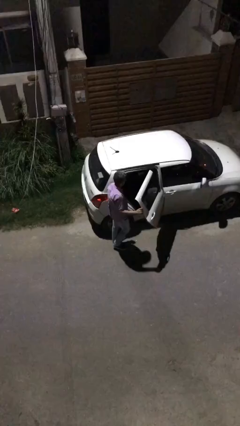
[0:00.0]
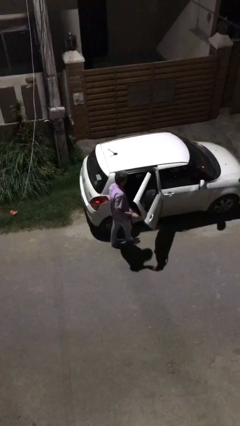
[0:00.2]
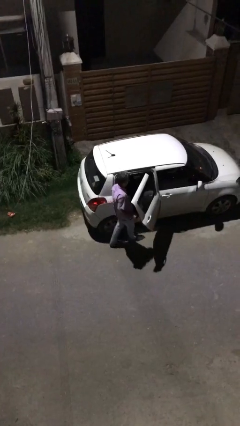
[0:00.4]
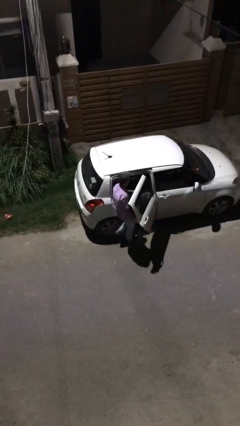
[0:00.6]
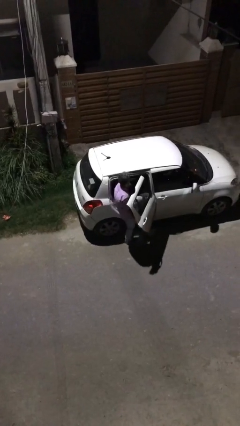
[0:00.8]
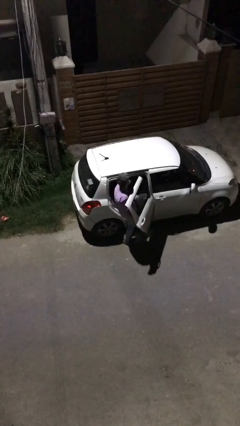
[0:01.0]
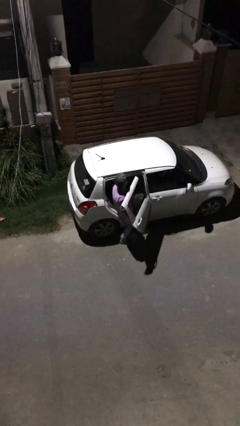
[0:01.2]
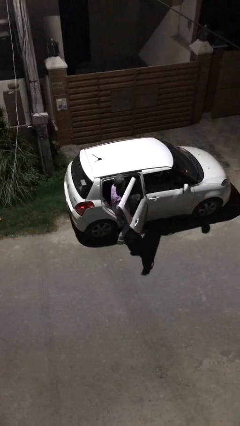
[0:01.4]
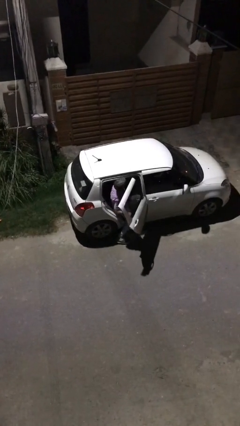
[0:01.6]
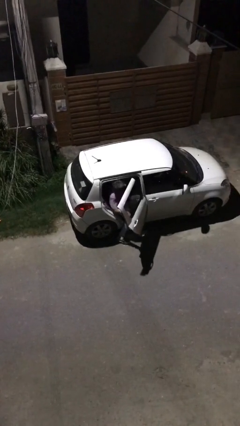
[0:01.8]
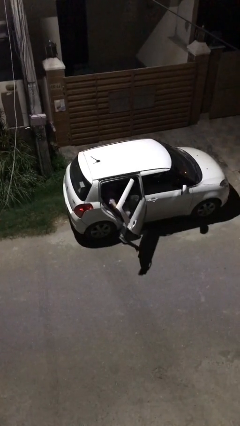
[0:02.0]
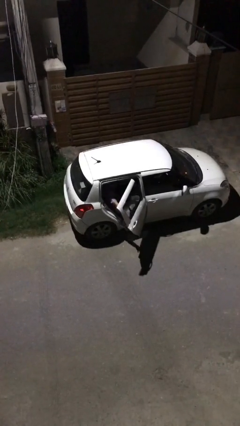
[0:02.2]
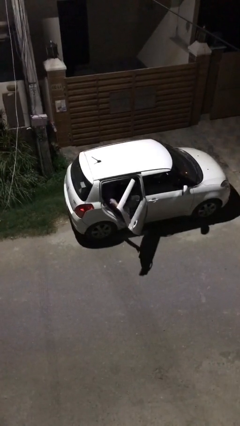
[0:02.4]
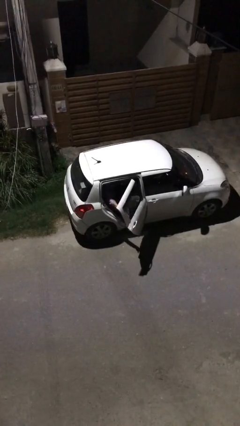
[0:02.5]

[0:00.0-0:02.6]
person enters car

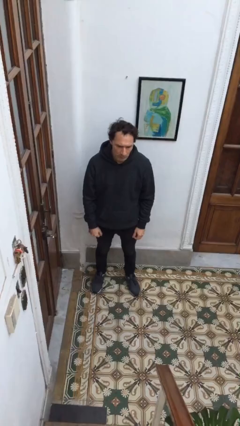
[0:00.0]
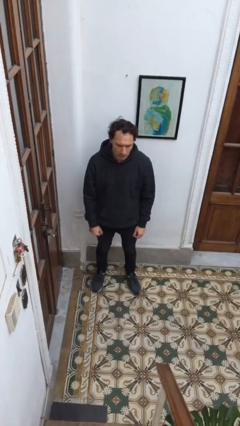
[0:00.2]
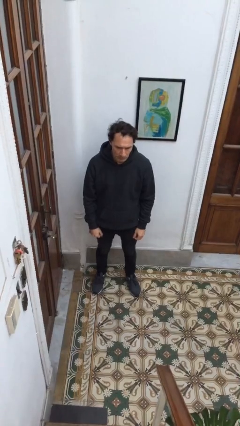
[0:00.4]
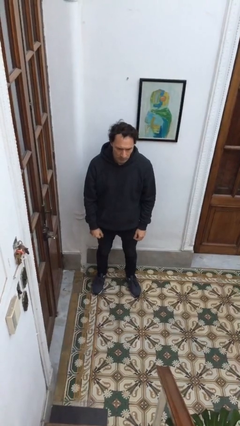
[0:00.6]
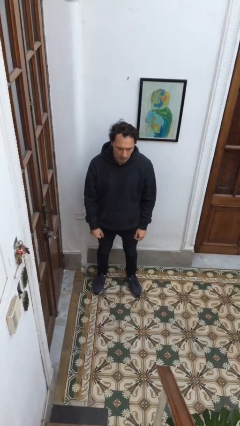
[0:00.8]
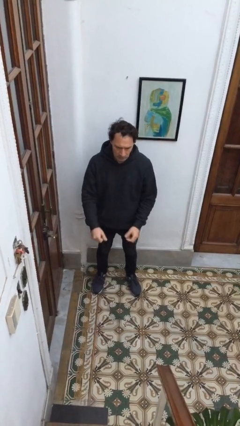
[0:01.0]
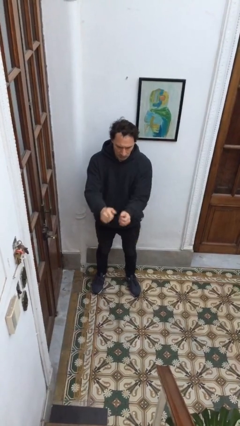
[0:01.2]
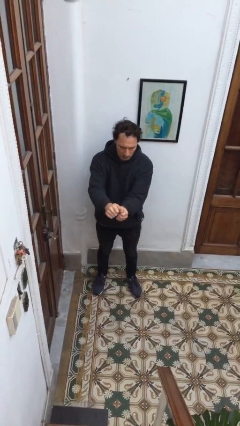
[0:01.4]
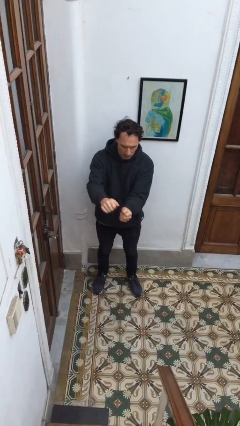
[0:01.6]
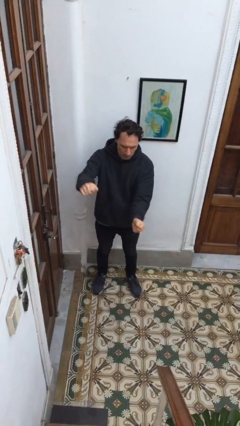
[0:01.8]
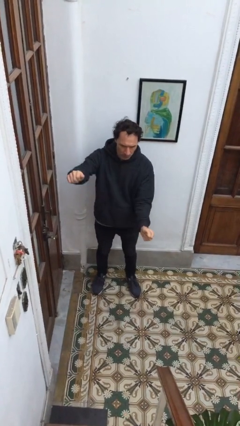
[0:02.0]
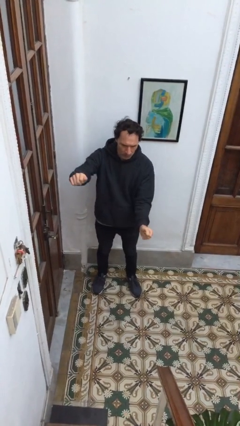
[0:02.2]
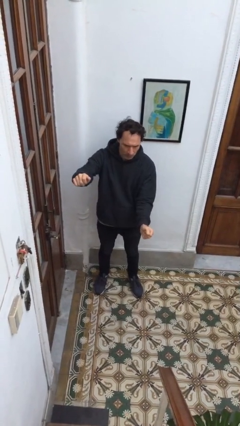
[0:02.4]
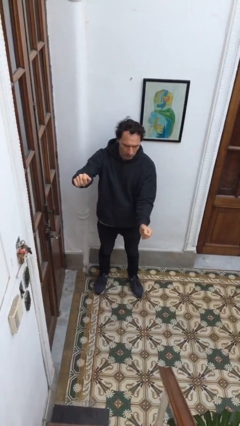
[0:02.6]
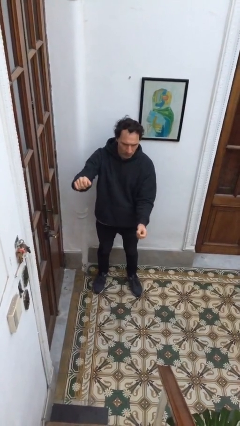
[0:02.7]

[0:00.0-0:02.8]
person gestures zoom in

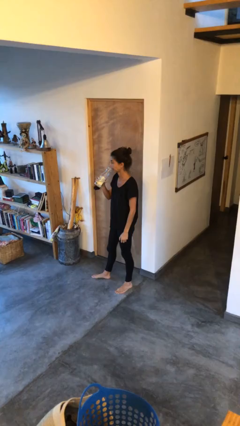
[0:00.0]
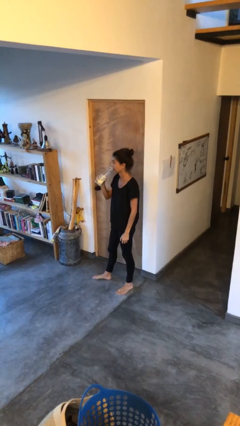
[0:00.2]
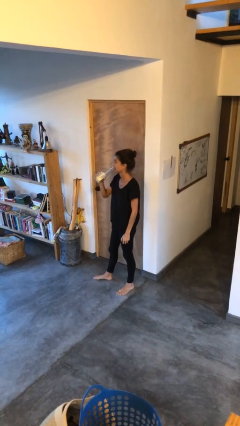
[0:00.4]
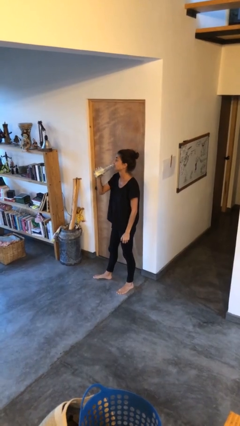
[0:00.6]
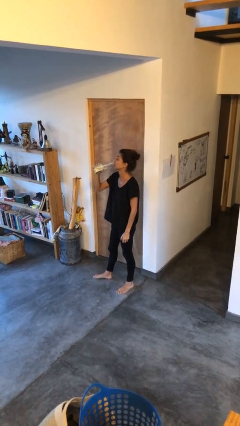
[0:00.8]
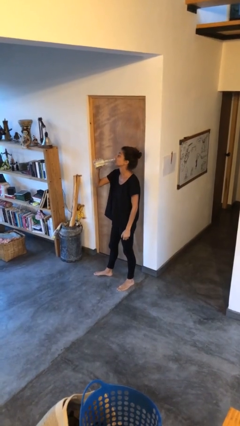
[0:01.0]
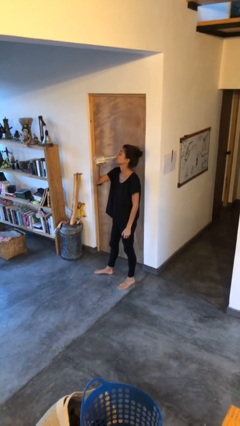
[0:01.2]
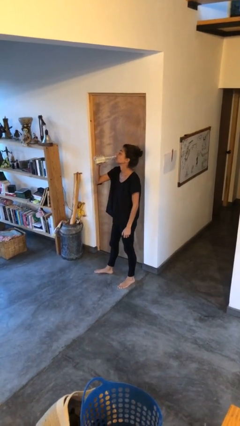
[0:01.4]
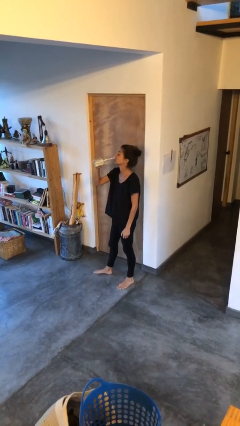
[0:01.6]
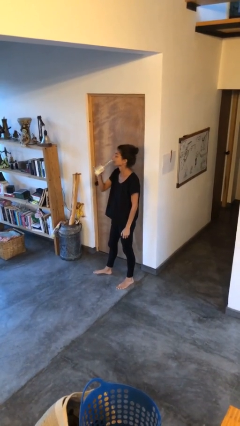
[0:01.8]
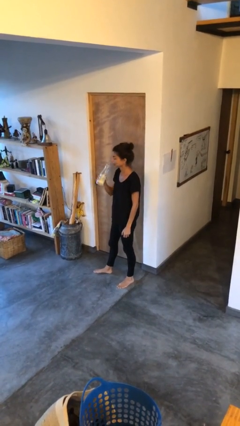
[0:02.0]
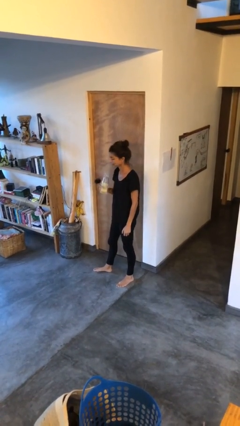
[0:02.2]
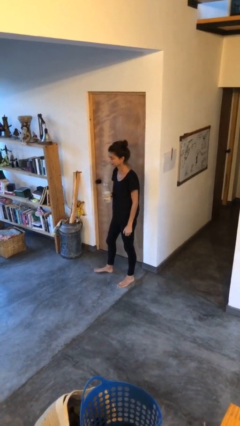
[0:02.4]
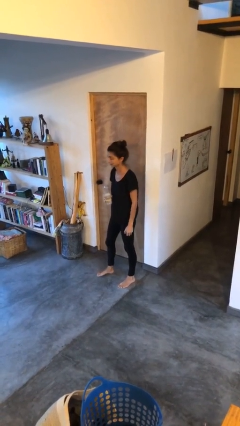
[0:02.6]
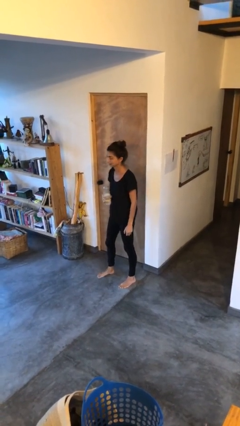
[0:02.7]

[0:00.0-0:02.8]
person drinks from bottle

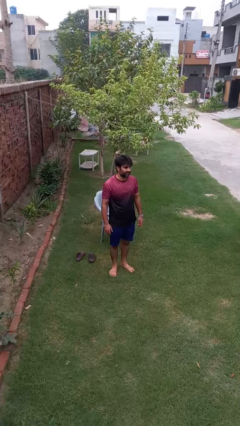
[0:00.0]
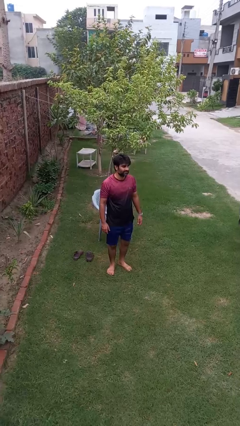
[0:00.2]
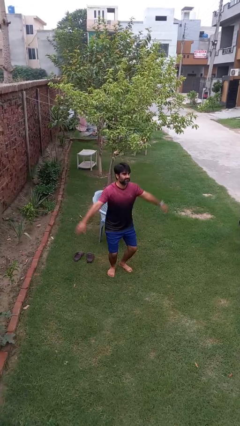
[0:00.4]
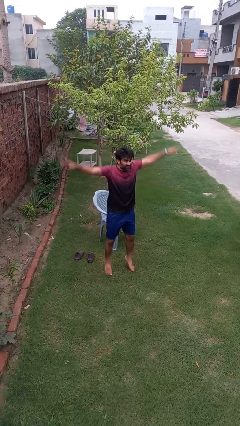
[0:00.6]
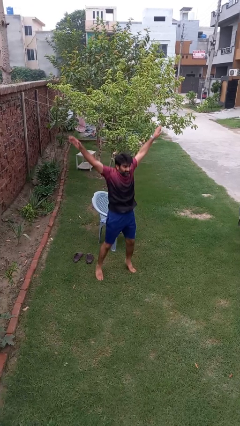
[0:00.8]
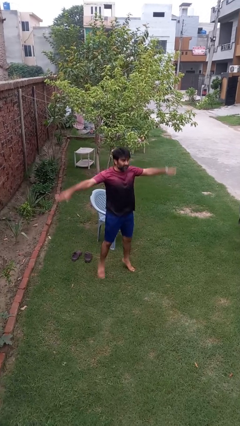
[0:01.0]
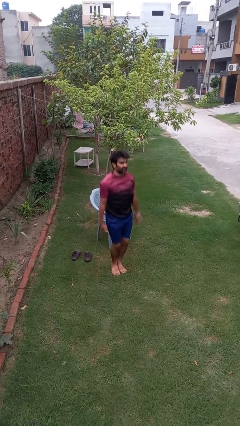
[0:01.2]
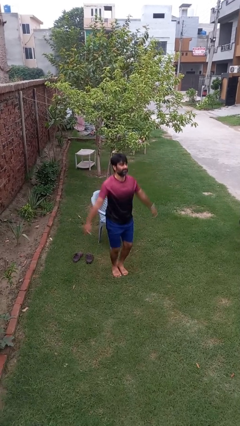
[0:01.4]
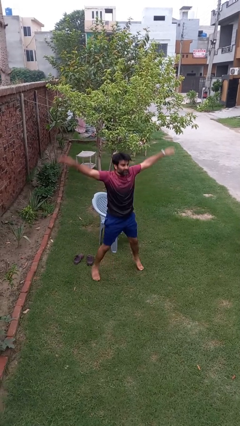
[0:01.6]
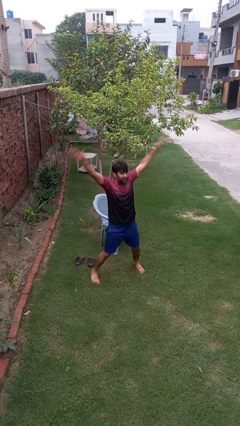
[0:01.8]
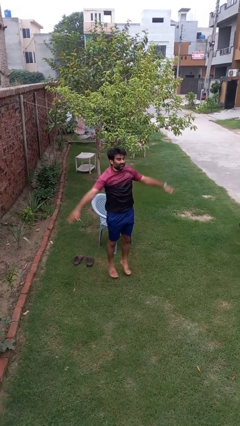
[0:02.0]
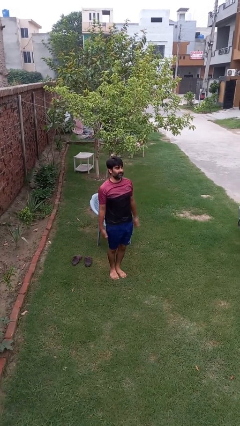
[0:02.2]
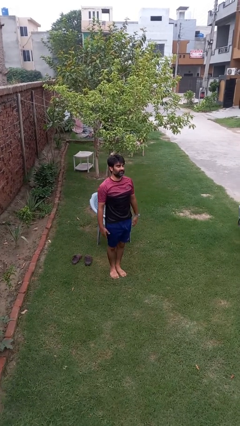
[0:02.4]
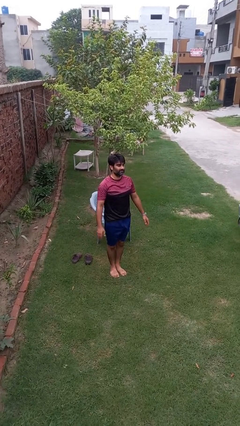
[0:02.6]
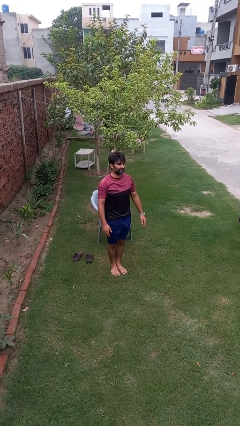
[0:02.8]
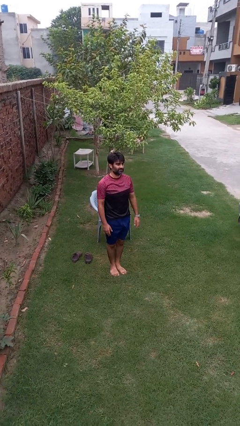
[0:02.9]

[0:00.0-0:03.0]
person exercises with jumping jacks

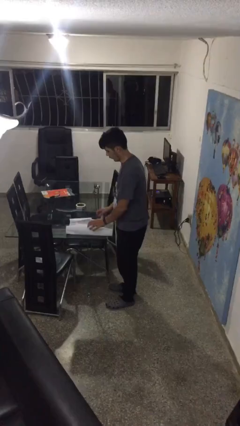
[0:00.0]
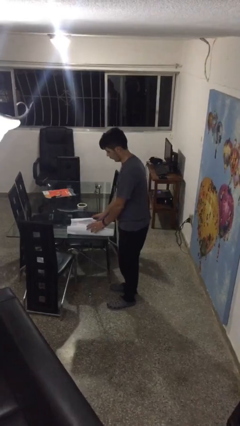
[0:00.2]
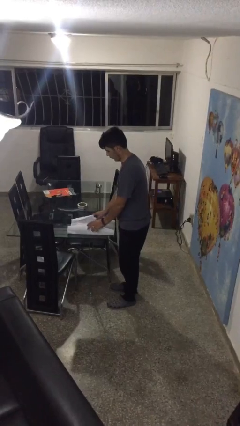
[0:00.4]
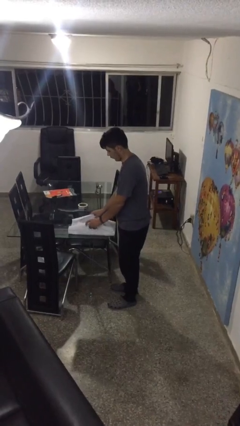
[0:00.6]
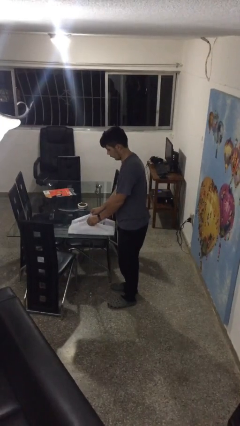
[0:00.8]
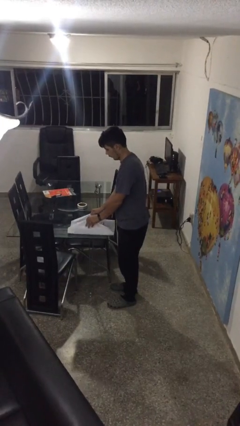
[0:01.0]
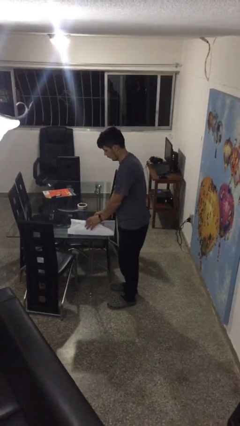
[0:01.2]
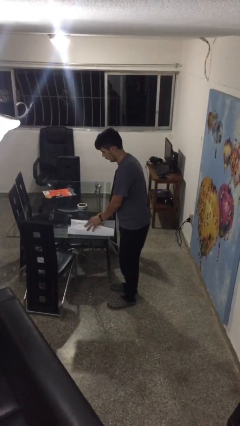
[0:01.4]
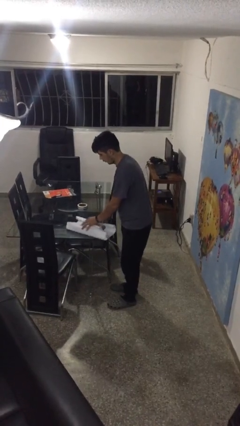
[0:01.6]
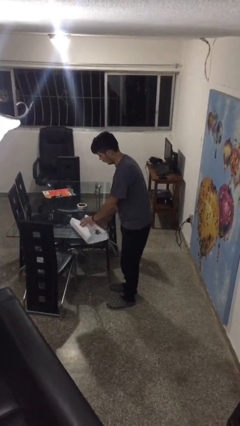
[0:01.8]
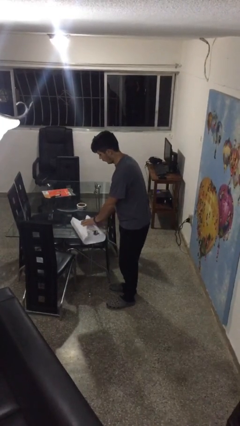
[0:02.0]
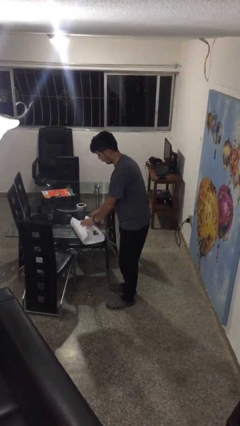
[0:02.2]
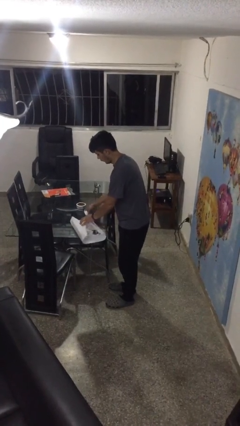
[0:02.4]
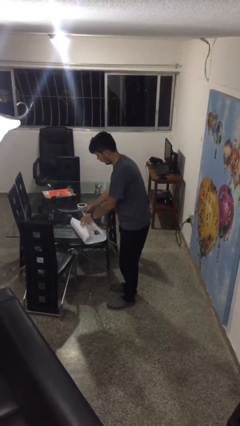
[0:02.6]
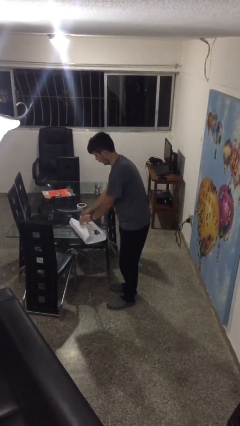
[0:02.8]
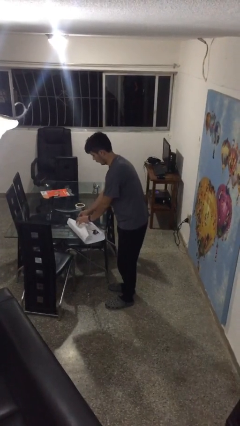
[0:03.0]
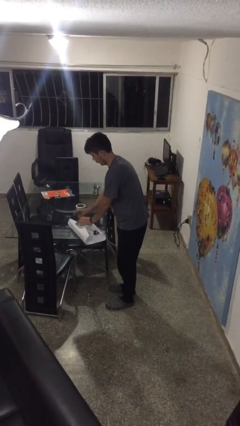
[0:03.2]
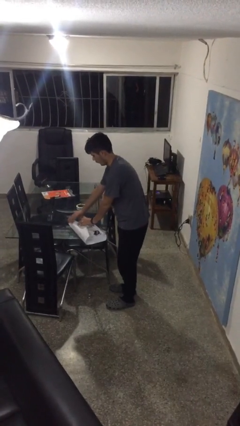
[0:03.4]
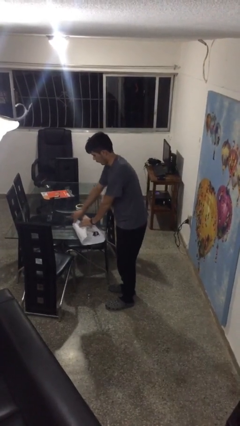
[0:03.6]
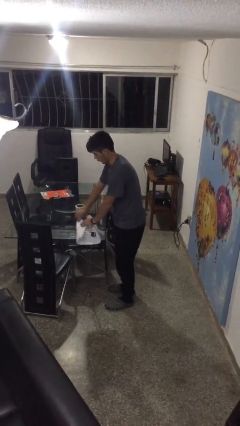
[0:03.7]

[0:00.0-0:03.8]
person wraps box

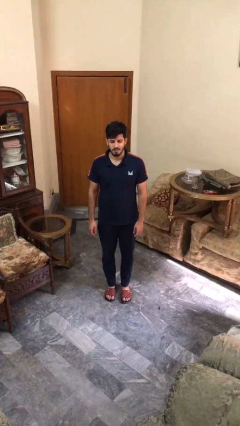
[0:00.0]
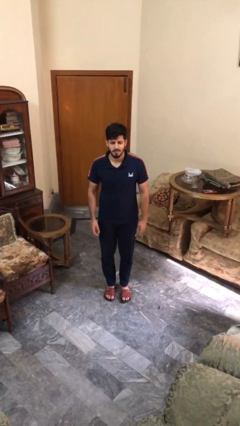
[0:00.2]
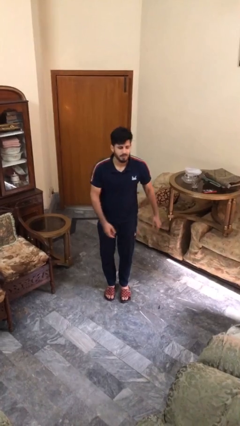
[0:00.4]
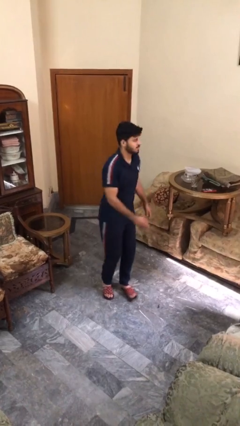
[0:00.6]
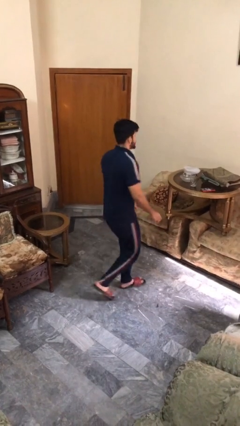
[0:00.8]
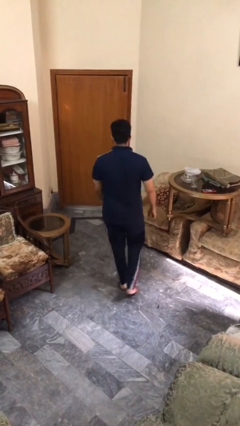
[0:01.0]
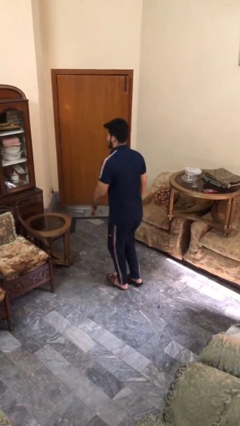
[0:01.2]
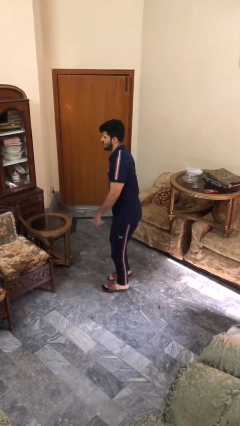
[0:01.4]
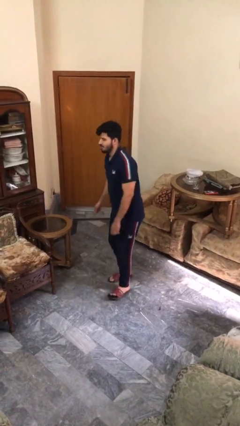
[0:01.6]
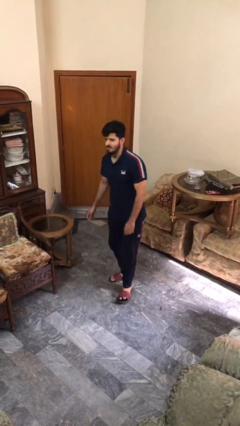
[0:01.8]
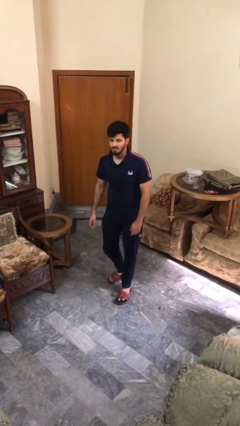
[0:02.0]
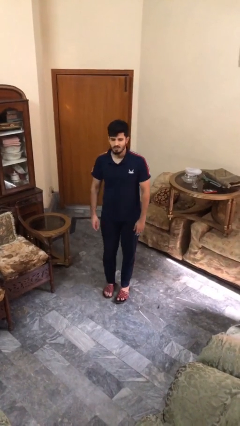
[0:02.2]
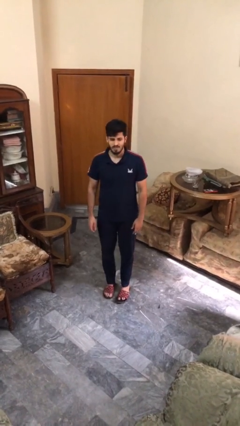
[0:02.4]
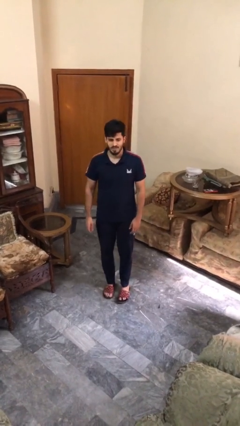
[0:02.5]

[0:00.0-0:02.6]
person twirls
